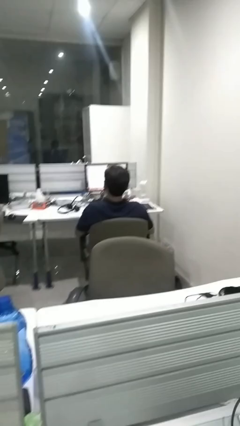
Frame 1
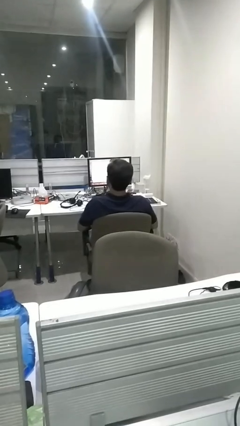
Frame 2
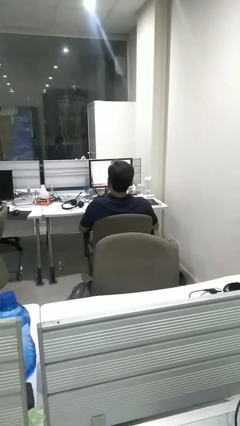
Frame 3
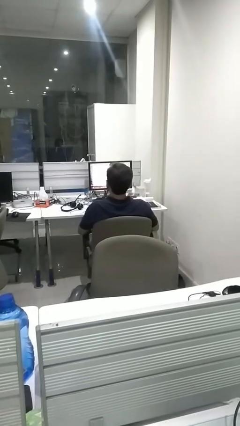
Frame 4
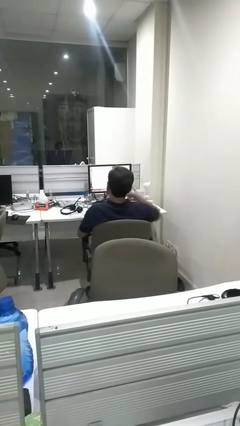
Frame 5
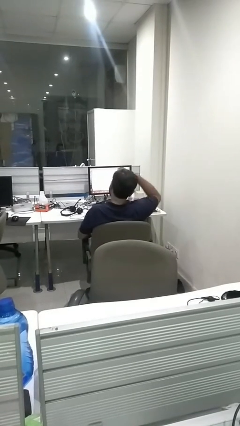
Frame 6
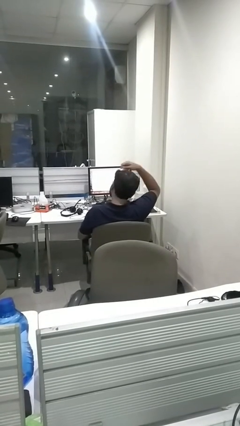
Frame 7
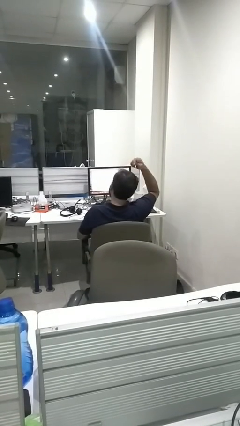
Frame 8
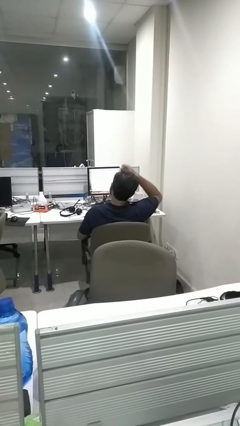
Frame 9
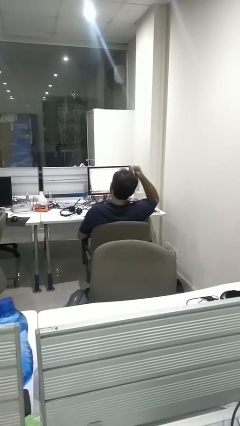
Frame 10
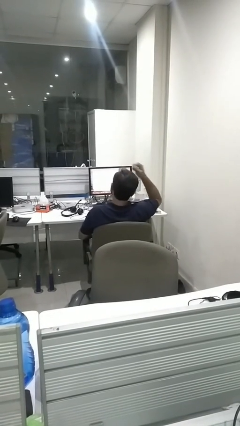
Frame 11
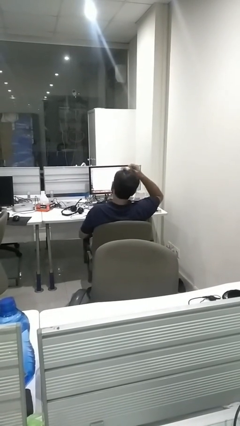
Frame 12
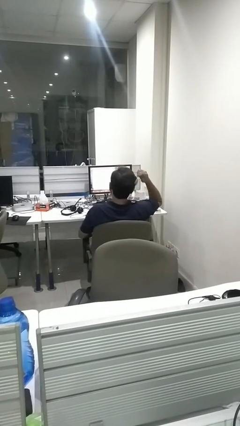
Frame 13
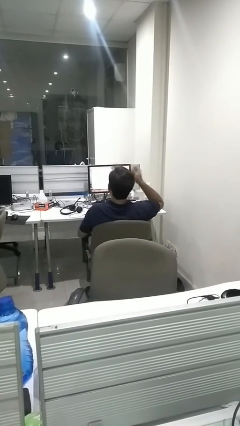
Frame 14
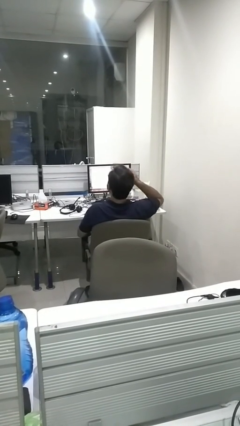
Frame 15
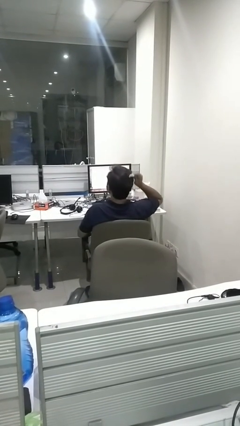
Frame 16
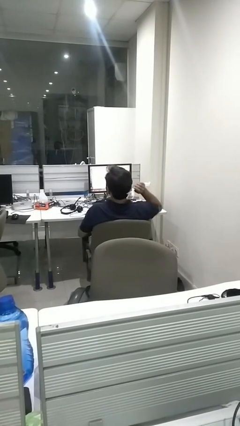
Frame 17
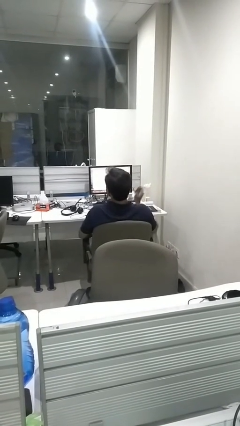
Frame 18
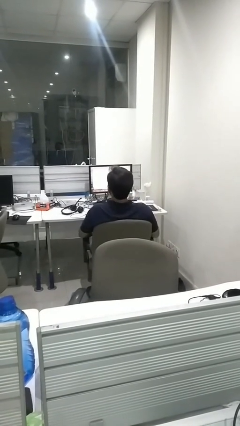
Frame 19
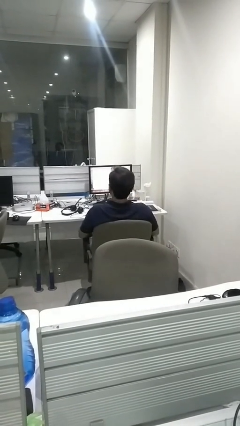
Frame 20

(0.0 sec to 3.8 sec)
person brushes hair

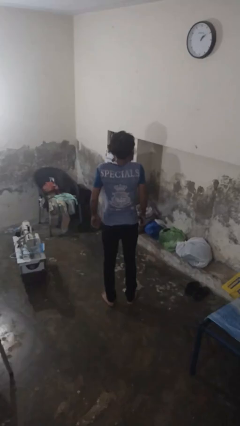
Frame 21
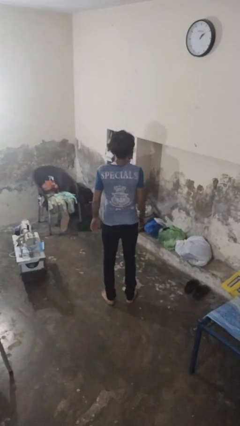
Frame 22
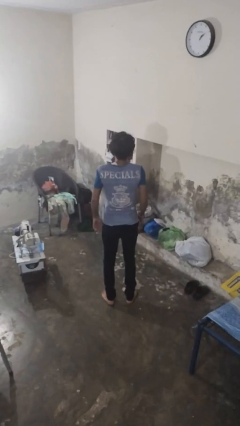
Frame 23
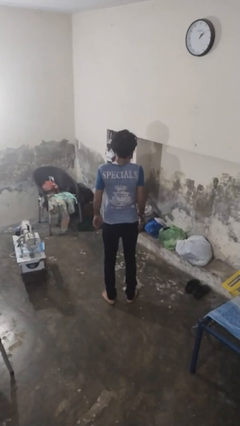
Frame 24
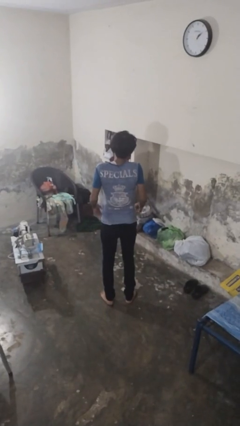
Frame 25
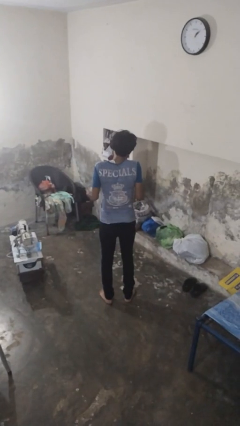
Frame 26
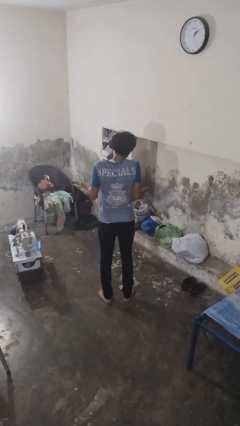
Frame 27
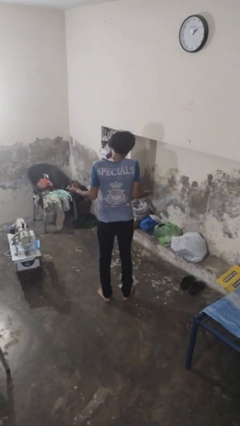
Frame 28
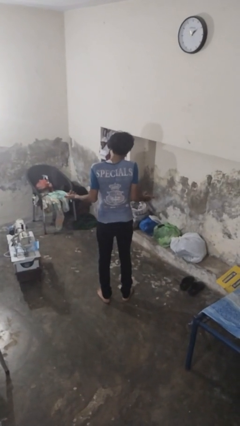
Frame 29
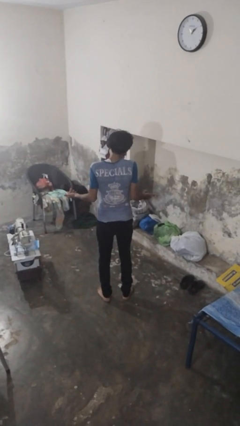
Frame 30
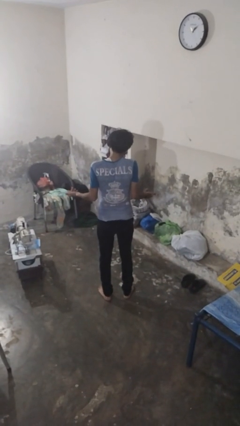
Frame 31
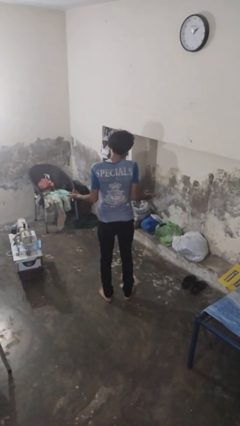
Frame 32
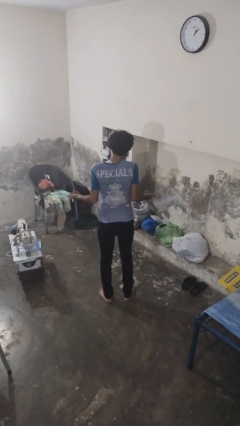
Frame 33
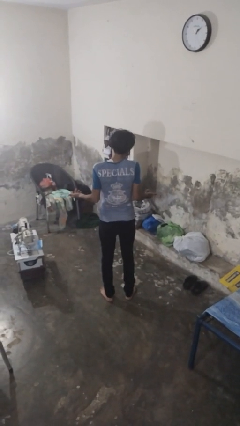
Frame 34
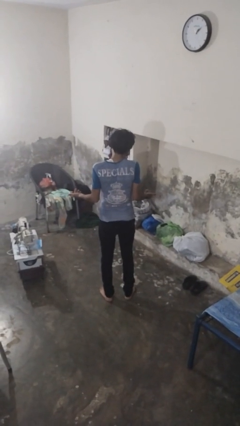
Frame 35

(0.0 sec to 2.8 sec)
person shrugs

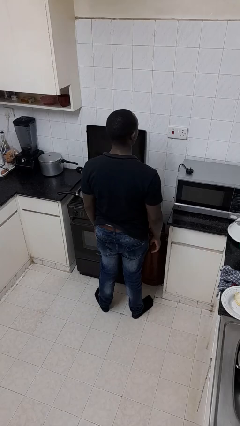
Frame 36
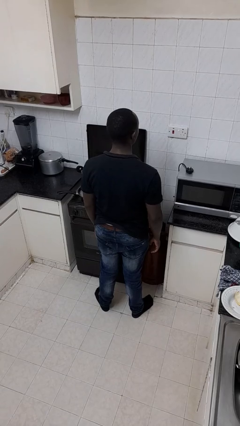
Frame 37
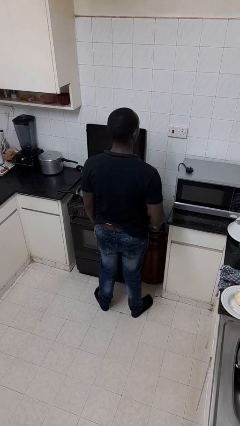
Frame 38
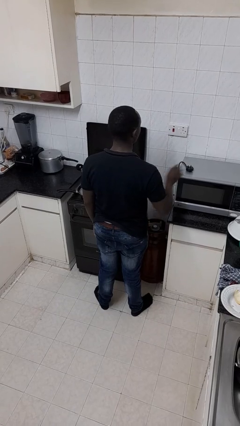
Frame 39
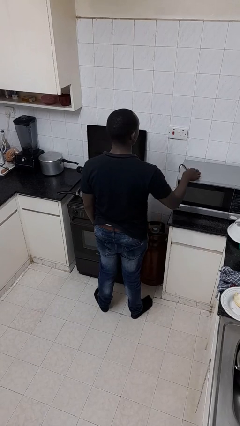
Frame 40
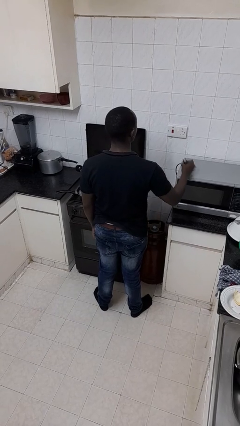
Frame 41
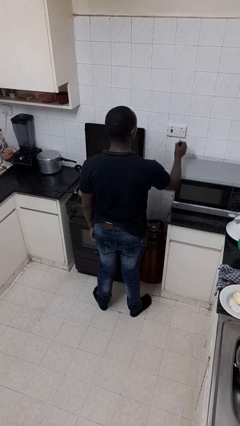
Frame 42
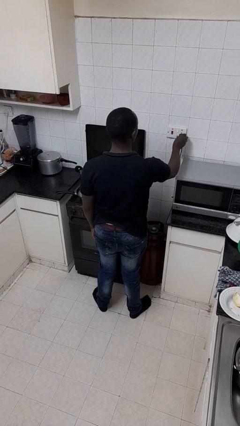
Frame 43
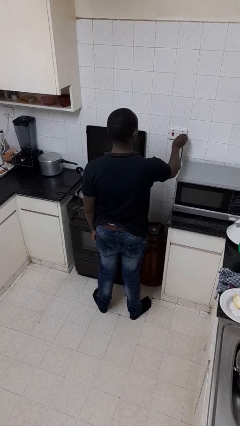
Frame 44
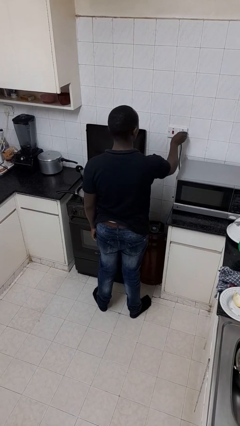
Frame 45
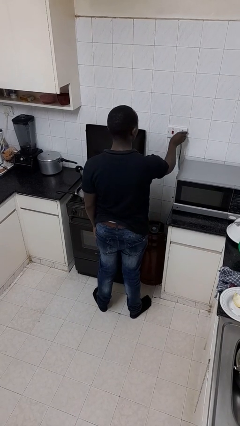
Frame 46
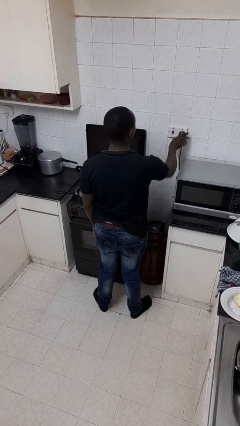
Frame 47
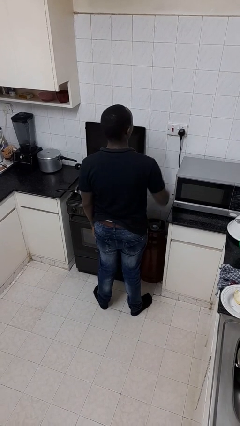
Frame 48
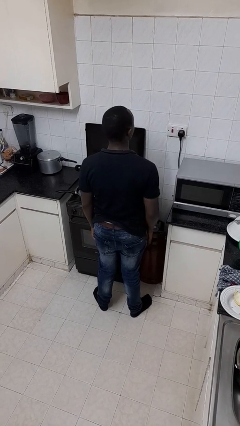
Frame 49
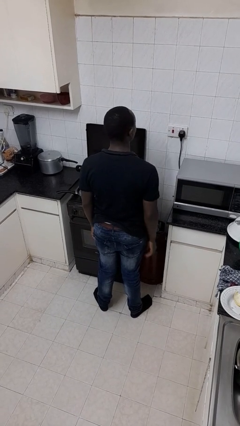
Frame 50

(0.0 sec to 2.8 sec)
person plugs into electrical socket

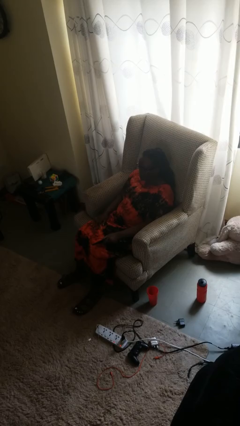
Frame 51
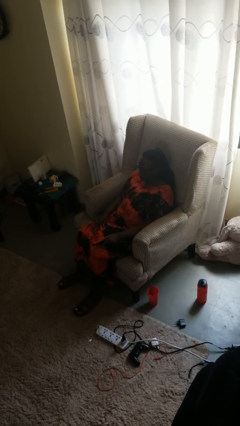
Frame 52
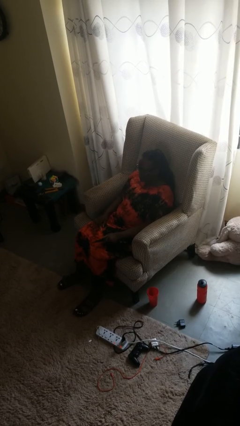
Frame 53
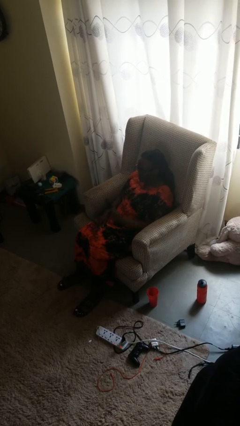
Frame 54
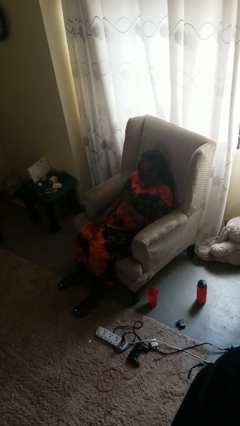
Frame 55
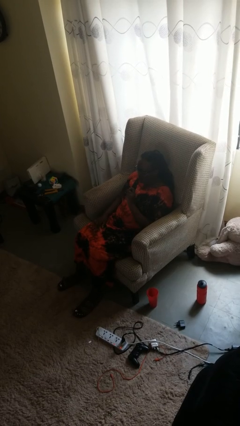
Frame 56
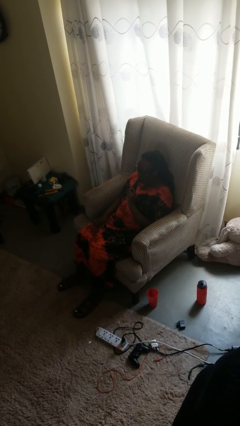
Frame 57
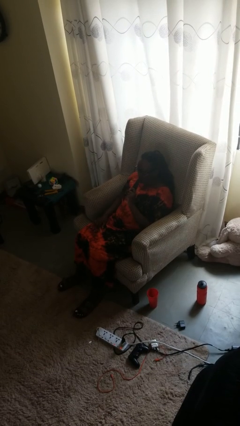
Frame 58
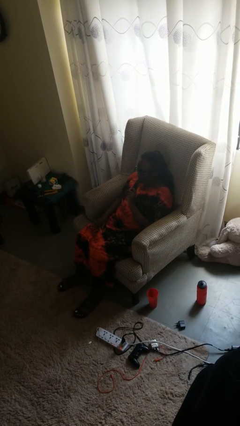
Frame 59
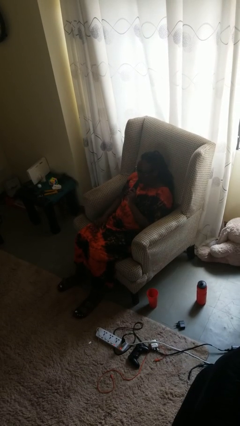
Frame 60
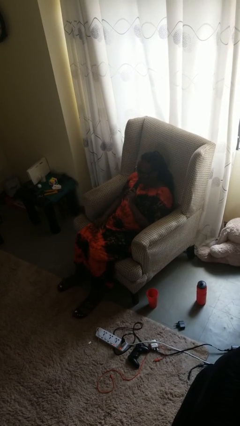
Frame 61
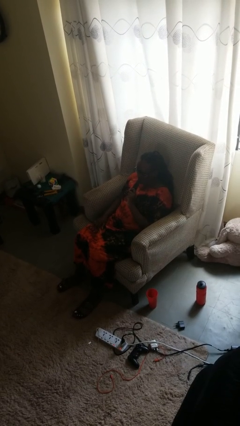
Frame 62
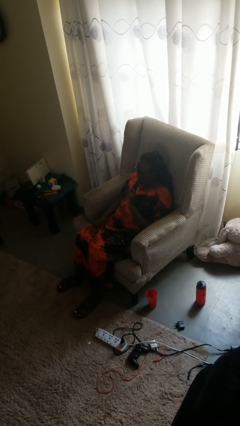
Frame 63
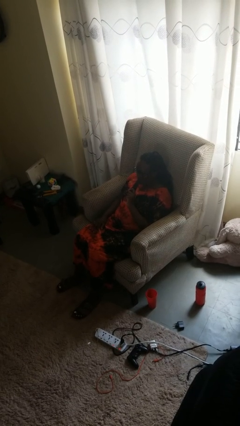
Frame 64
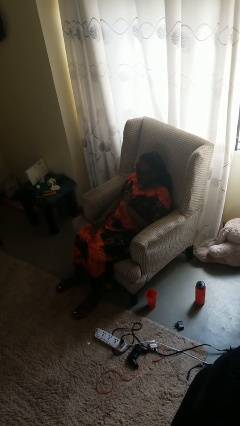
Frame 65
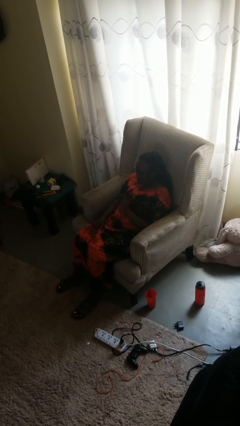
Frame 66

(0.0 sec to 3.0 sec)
person vapes

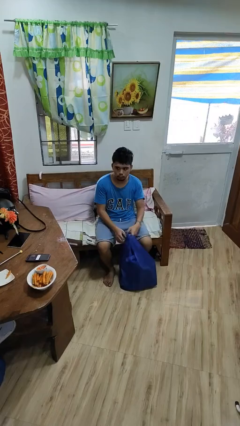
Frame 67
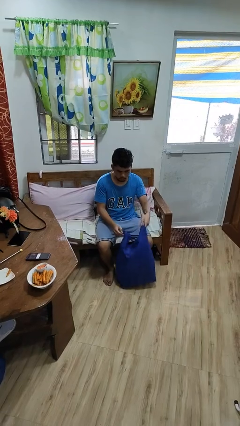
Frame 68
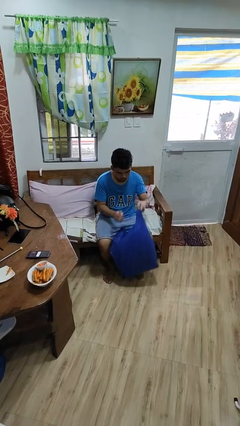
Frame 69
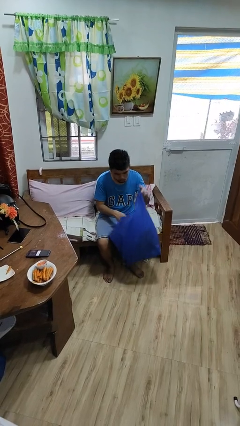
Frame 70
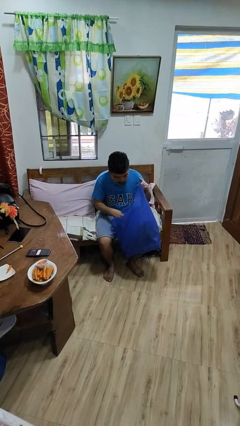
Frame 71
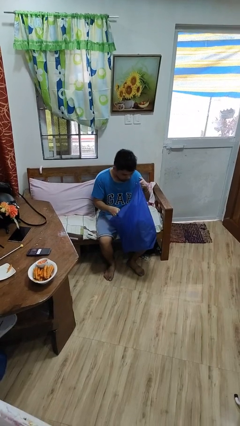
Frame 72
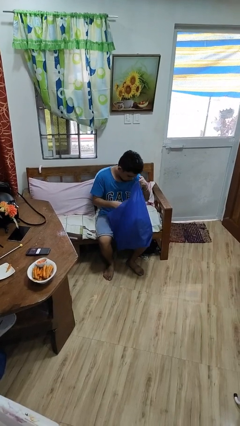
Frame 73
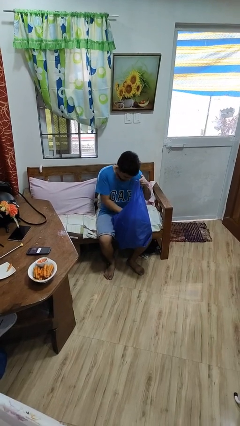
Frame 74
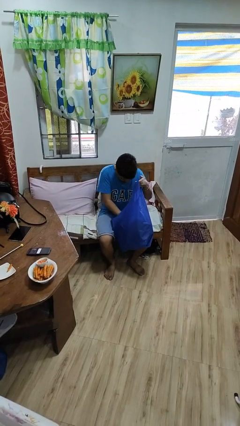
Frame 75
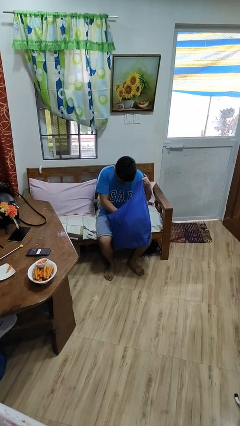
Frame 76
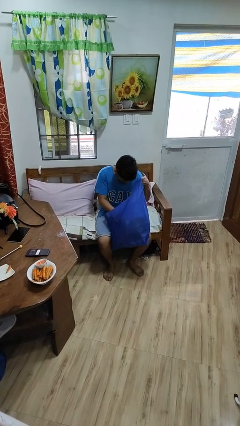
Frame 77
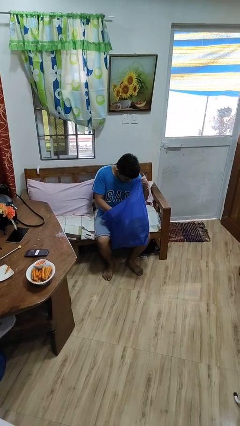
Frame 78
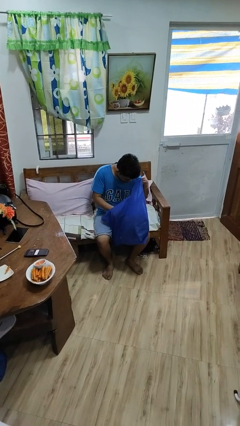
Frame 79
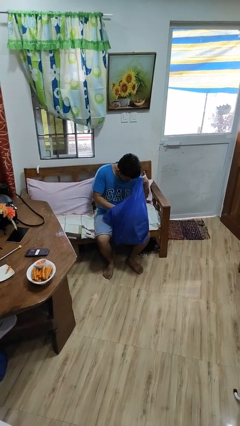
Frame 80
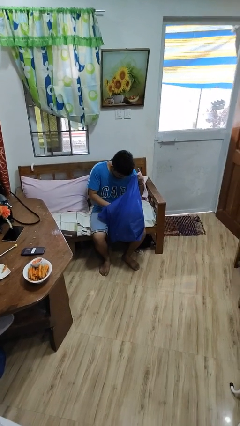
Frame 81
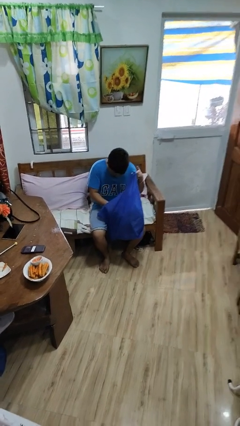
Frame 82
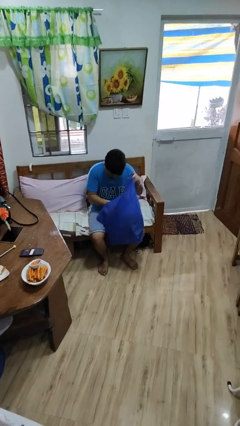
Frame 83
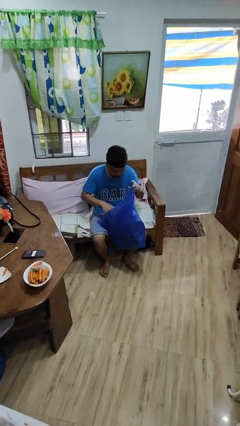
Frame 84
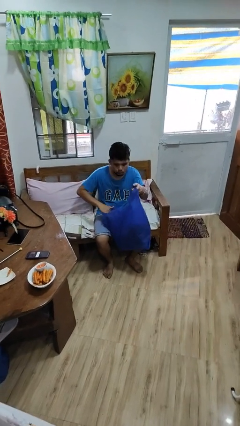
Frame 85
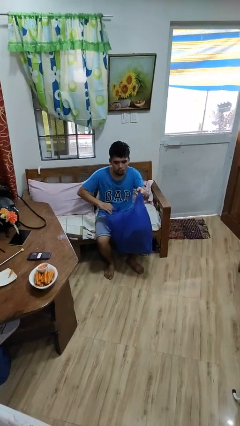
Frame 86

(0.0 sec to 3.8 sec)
person searches in bag

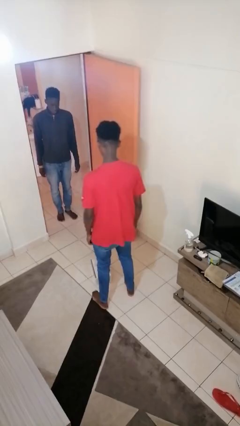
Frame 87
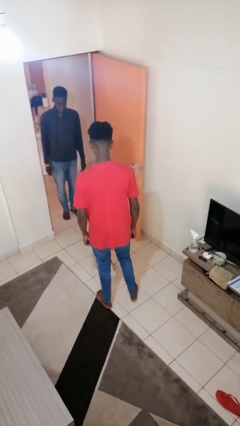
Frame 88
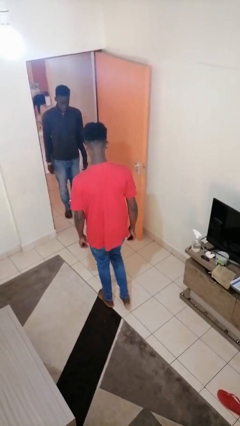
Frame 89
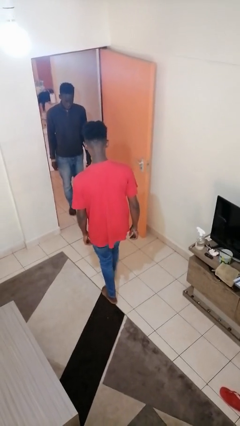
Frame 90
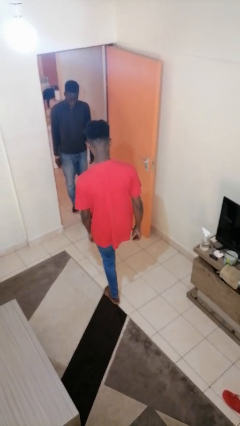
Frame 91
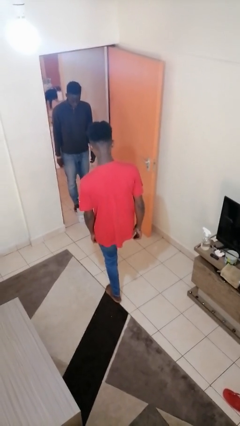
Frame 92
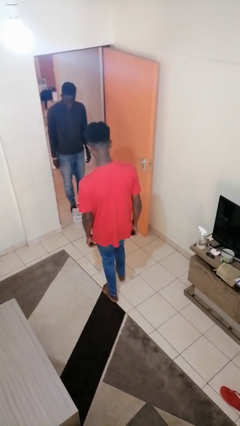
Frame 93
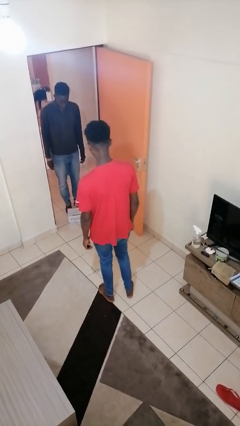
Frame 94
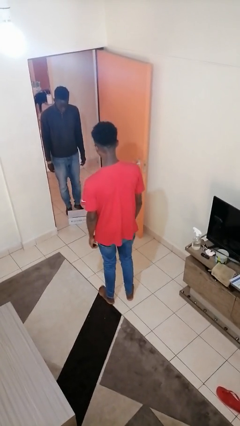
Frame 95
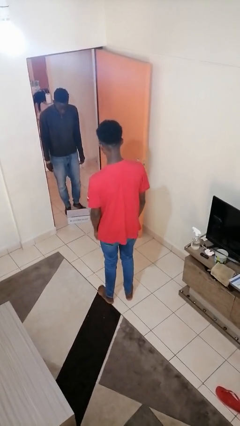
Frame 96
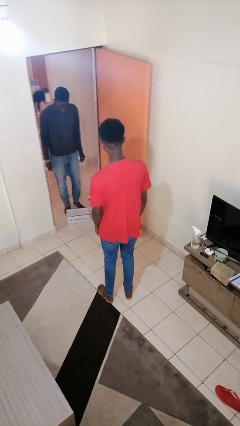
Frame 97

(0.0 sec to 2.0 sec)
person kicks object to person
